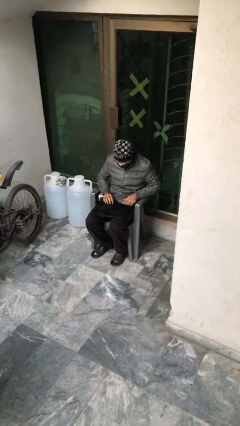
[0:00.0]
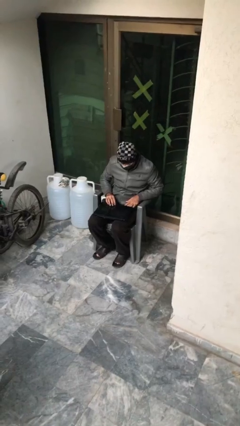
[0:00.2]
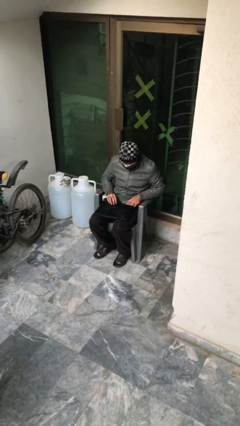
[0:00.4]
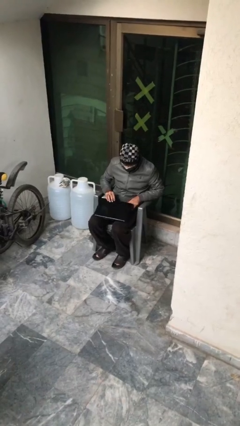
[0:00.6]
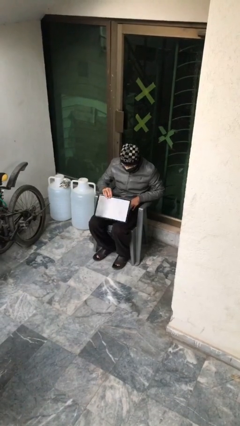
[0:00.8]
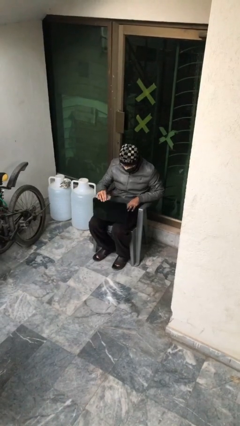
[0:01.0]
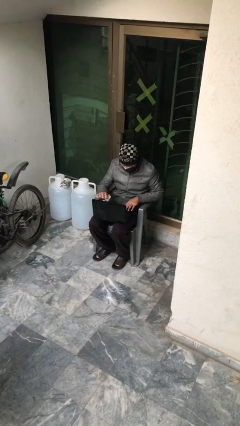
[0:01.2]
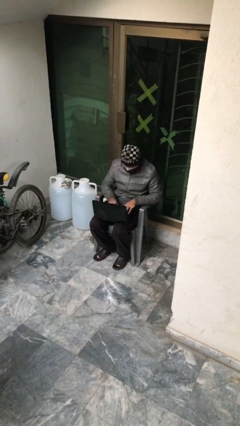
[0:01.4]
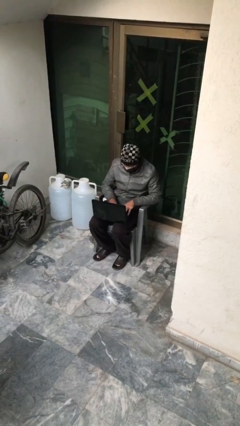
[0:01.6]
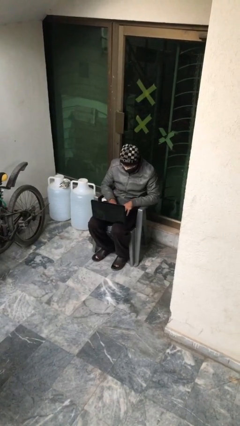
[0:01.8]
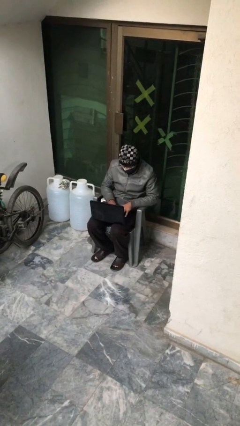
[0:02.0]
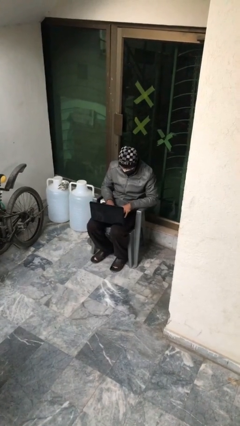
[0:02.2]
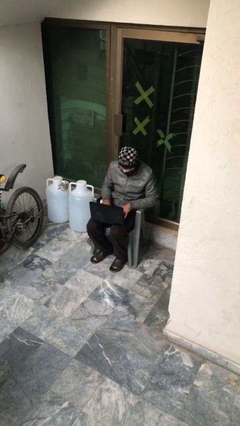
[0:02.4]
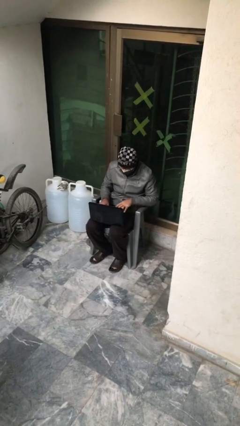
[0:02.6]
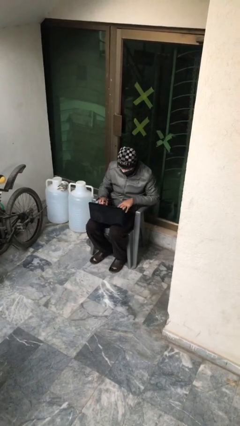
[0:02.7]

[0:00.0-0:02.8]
person interacts with laptop

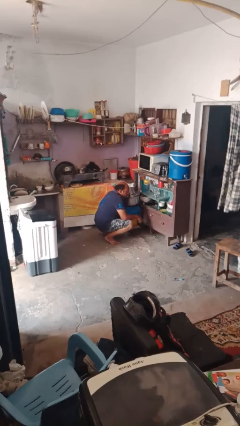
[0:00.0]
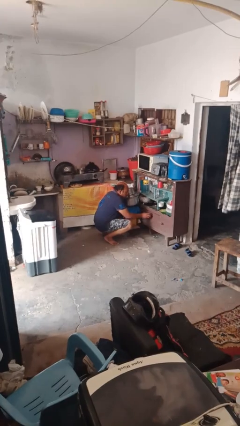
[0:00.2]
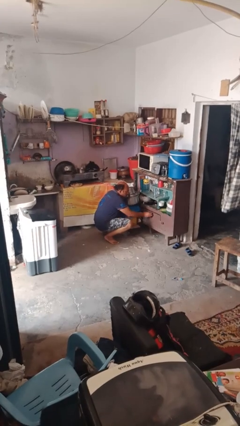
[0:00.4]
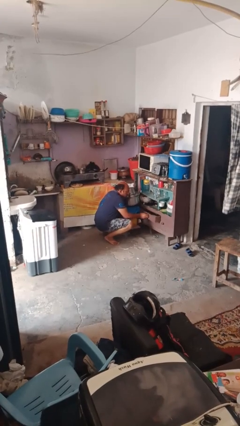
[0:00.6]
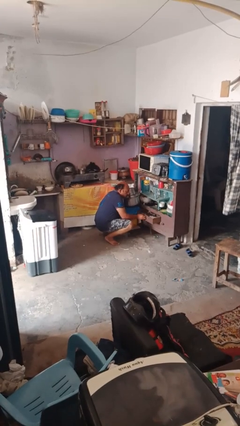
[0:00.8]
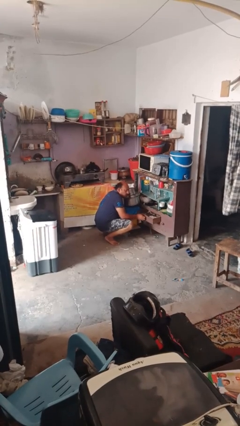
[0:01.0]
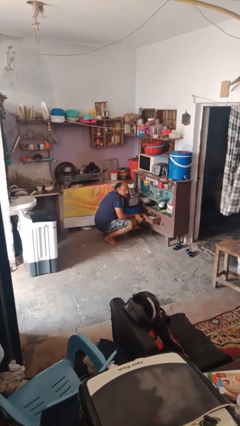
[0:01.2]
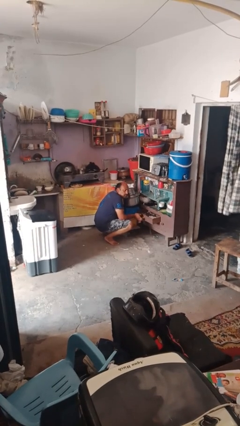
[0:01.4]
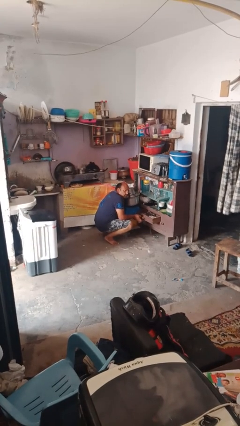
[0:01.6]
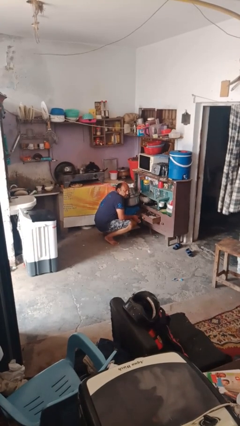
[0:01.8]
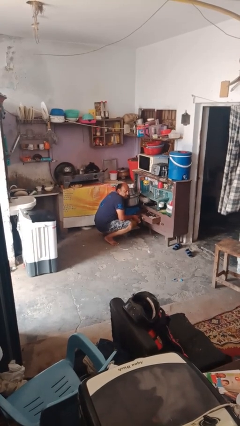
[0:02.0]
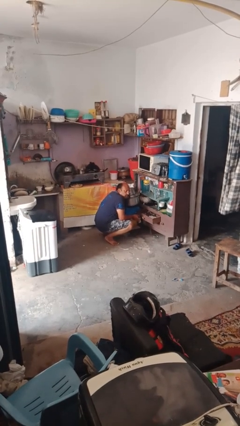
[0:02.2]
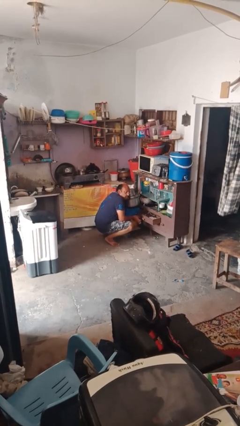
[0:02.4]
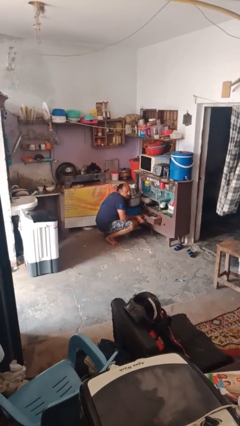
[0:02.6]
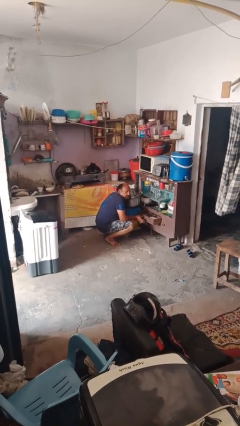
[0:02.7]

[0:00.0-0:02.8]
person opens kitchen drawer

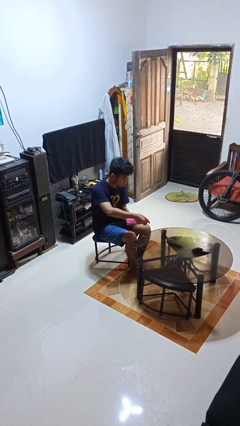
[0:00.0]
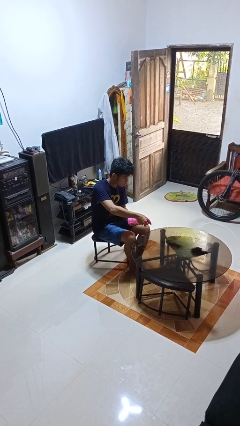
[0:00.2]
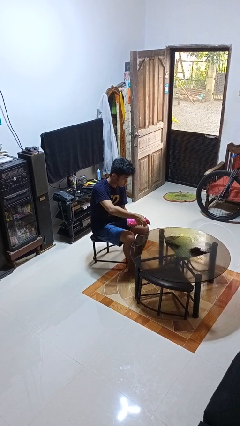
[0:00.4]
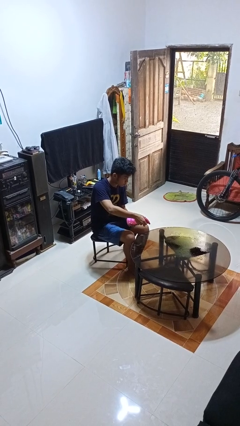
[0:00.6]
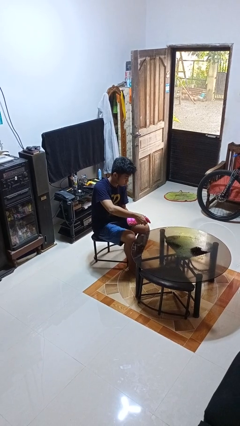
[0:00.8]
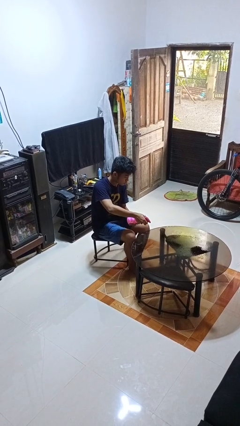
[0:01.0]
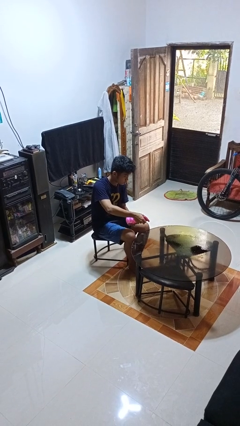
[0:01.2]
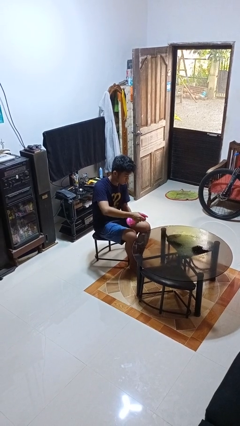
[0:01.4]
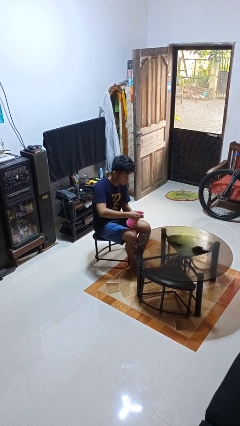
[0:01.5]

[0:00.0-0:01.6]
person sprays from bottle

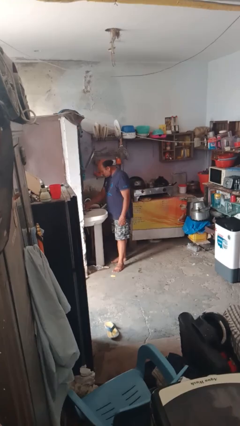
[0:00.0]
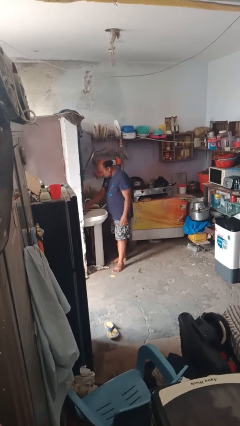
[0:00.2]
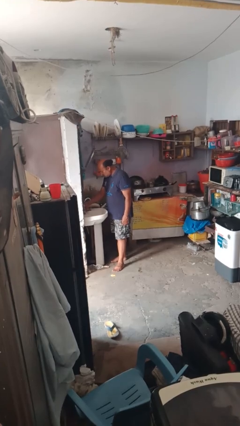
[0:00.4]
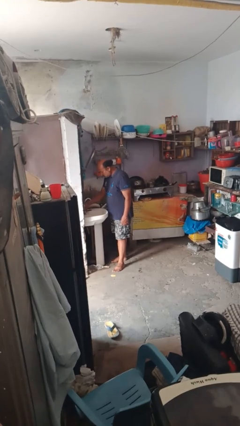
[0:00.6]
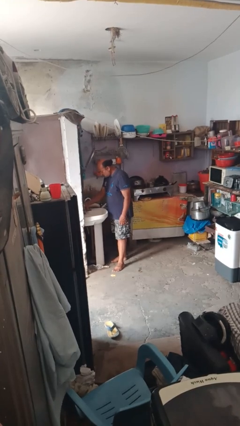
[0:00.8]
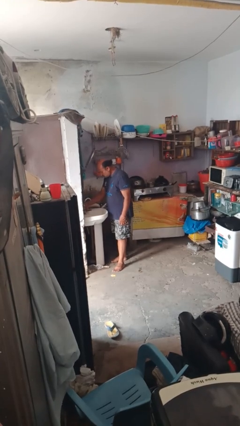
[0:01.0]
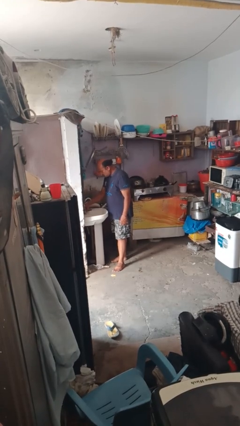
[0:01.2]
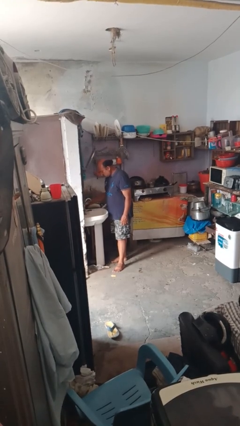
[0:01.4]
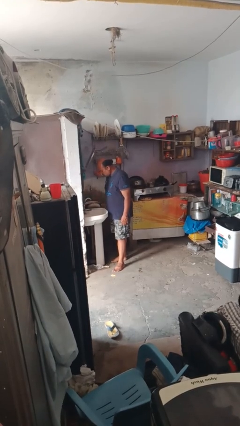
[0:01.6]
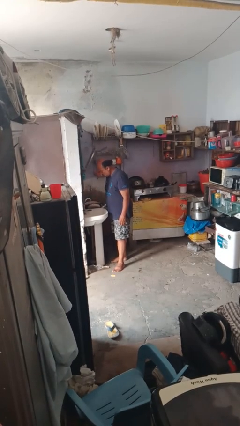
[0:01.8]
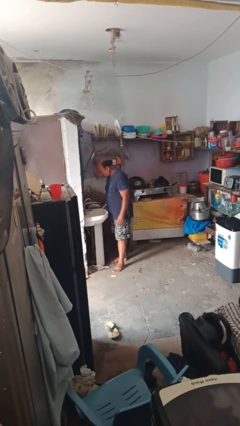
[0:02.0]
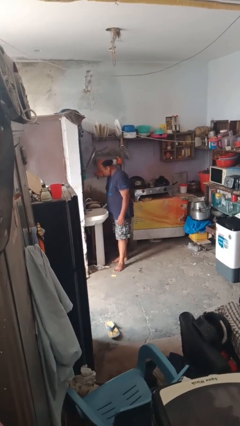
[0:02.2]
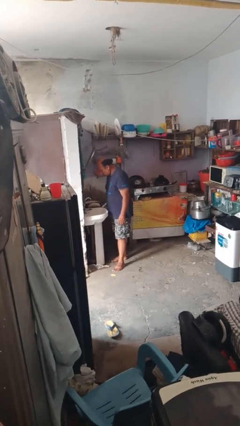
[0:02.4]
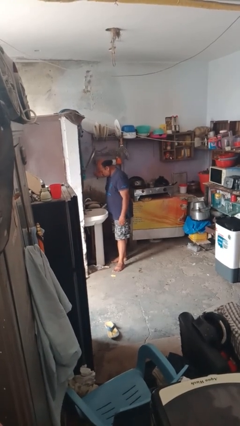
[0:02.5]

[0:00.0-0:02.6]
person turns off faucet

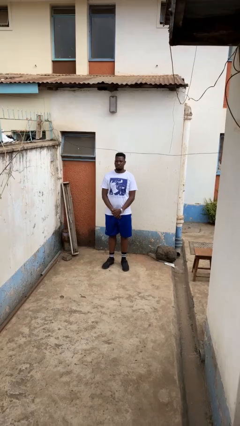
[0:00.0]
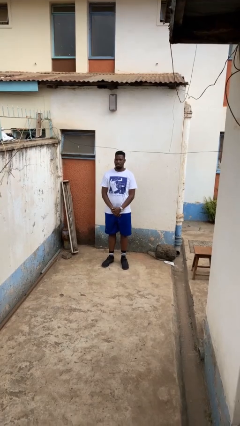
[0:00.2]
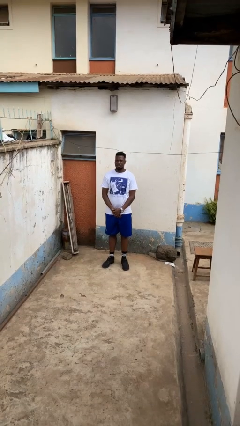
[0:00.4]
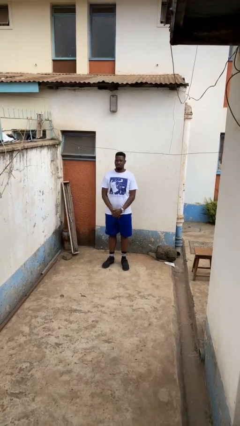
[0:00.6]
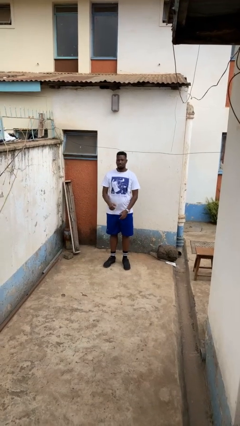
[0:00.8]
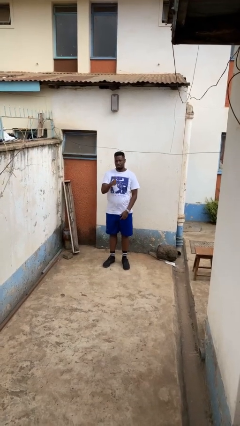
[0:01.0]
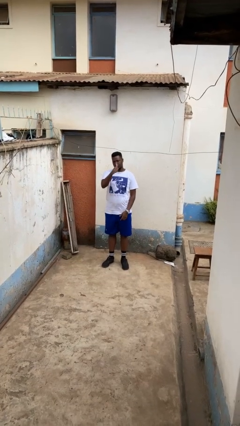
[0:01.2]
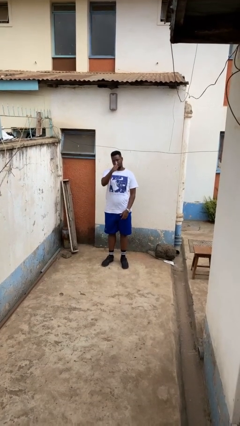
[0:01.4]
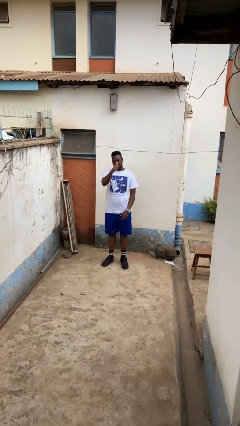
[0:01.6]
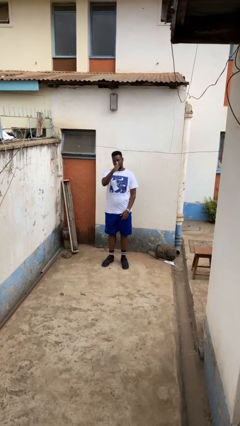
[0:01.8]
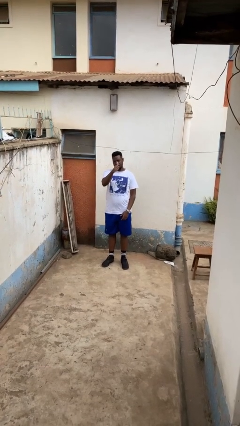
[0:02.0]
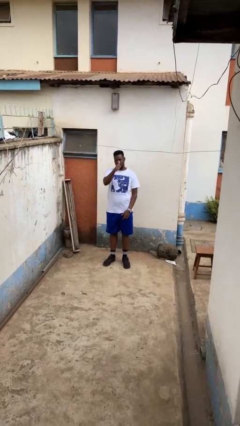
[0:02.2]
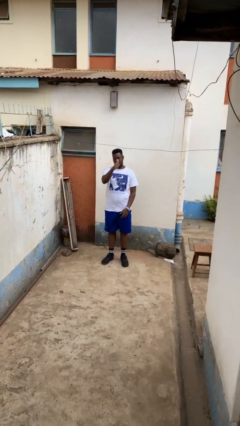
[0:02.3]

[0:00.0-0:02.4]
person gestures thumbs up

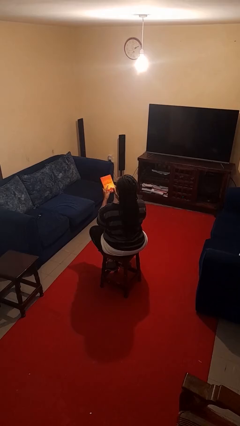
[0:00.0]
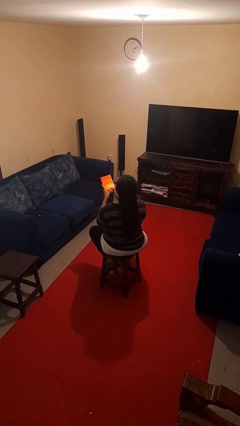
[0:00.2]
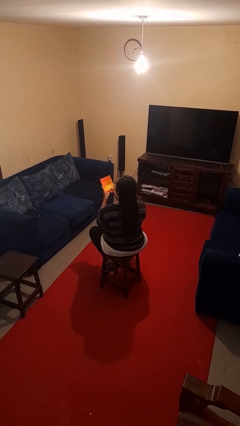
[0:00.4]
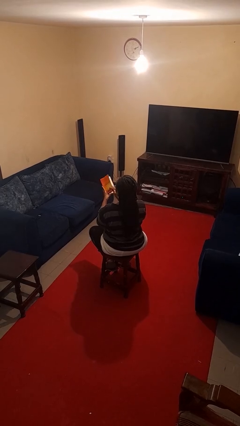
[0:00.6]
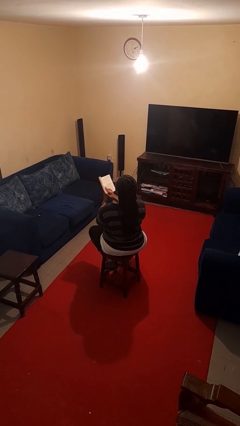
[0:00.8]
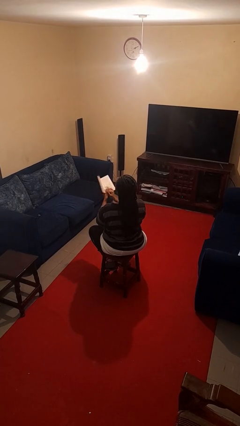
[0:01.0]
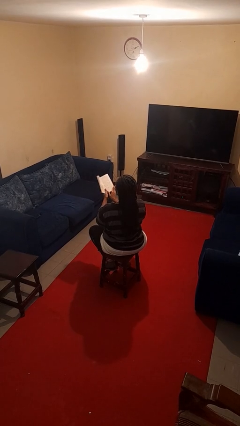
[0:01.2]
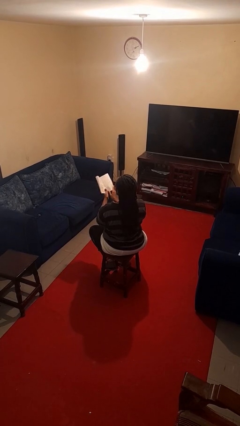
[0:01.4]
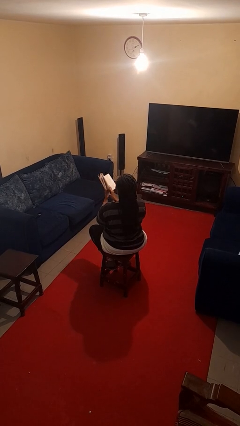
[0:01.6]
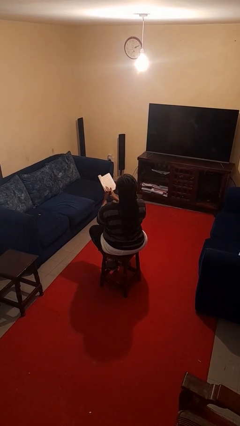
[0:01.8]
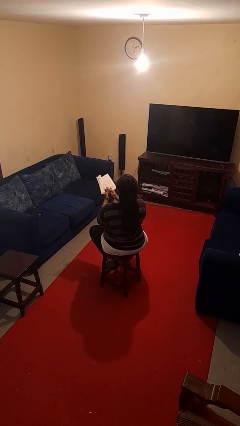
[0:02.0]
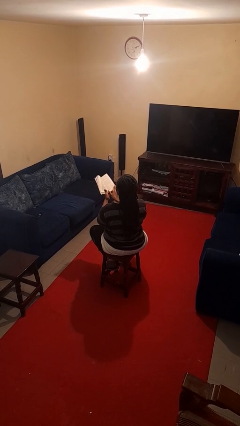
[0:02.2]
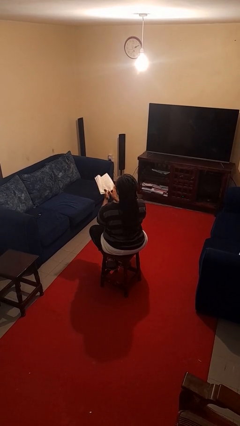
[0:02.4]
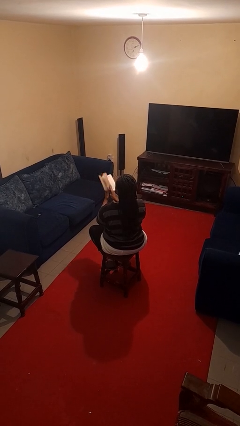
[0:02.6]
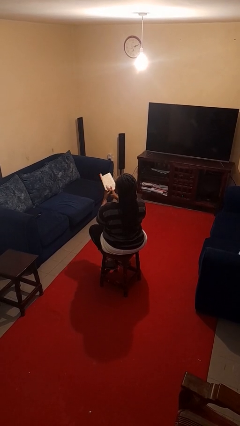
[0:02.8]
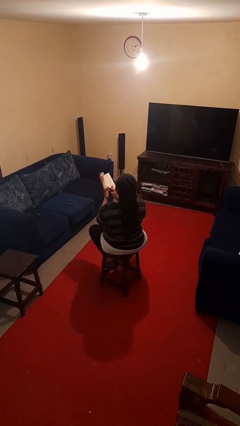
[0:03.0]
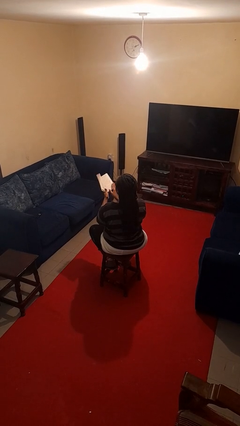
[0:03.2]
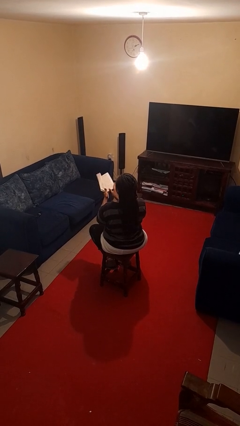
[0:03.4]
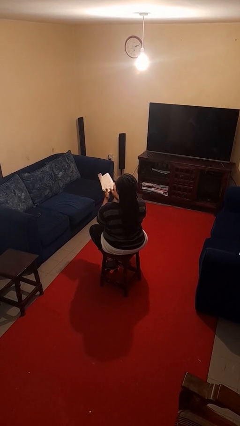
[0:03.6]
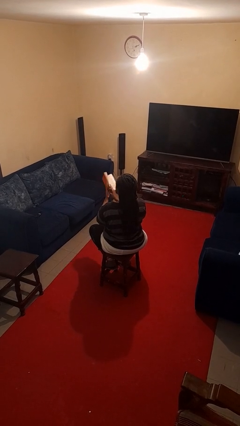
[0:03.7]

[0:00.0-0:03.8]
person reads book

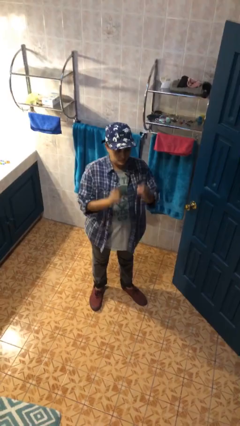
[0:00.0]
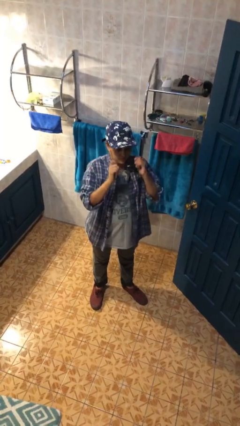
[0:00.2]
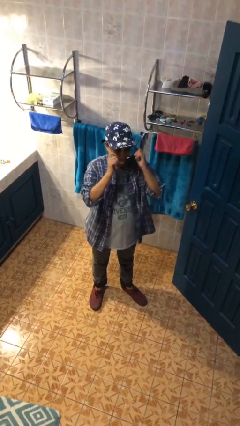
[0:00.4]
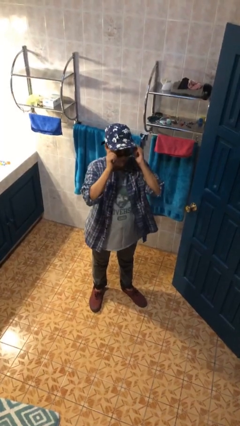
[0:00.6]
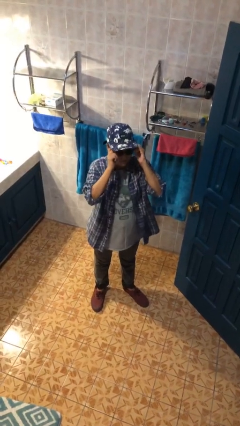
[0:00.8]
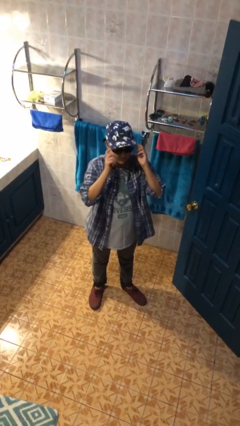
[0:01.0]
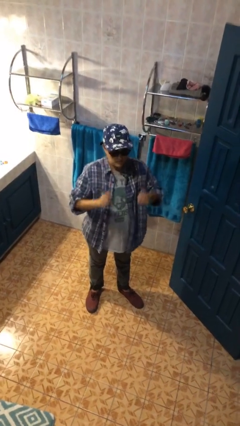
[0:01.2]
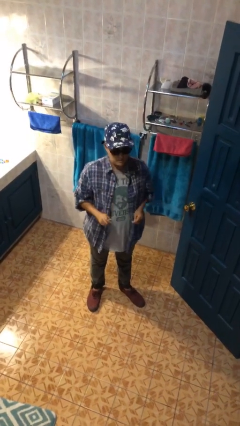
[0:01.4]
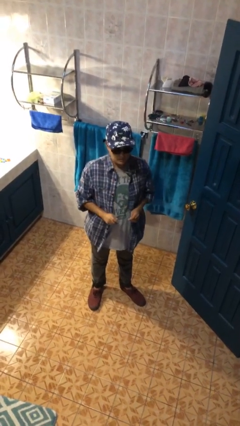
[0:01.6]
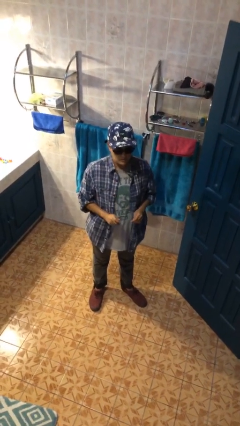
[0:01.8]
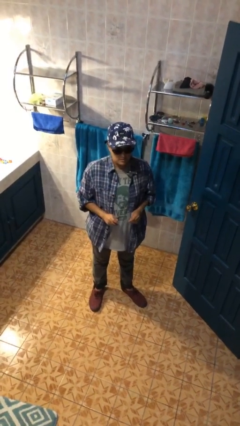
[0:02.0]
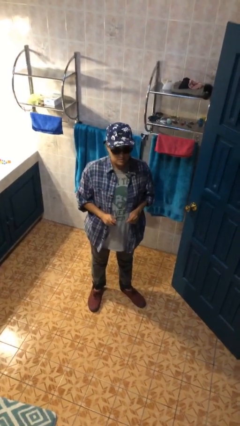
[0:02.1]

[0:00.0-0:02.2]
person puts on sunglasses
